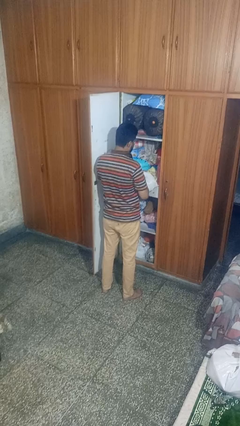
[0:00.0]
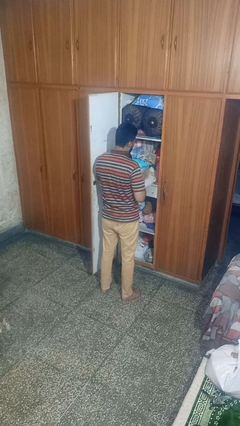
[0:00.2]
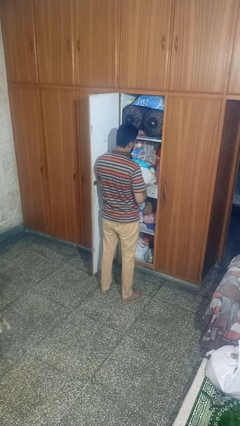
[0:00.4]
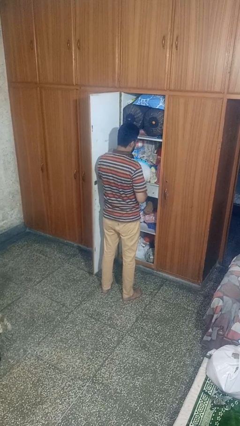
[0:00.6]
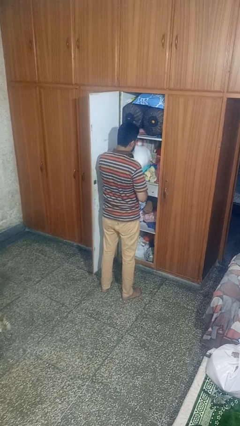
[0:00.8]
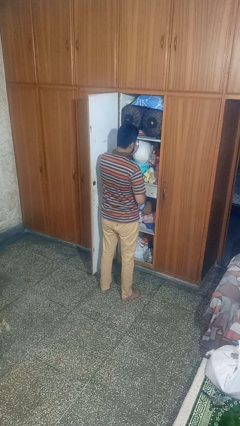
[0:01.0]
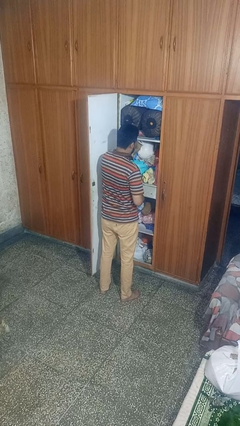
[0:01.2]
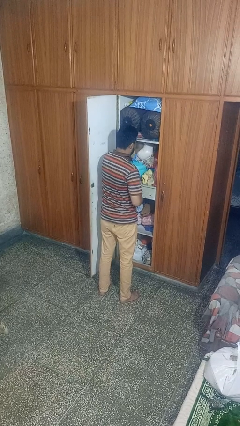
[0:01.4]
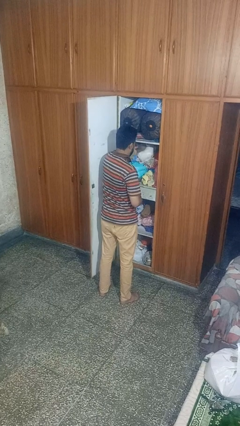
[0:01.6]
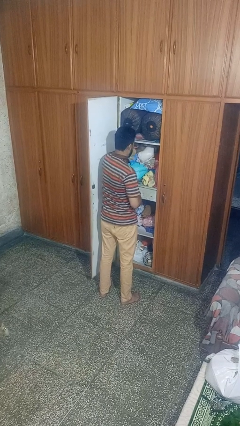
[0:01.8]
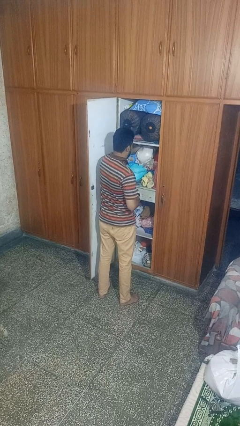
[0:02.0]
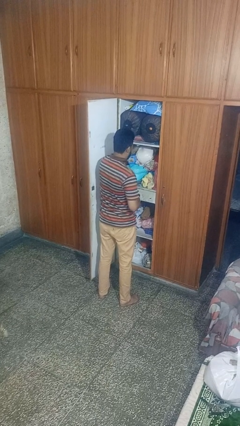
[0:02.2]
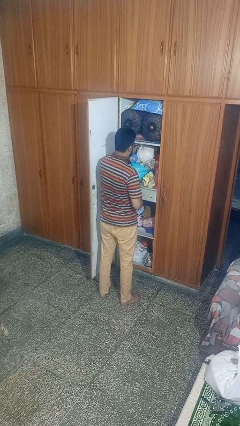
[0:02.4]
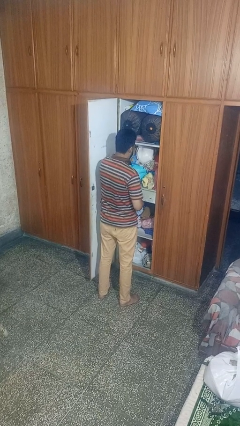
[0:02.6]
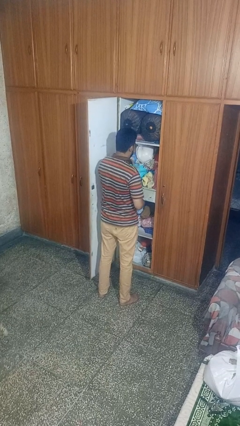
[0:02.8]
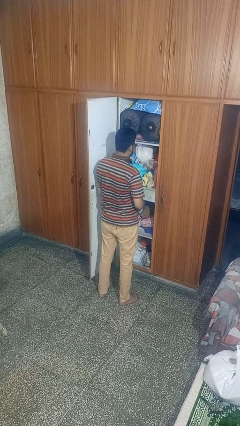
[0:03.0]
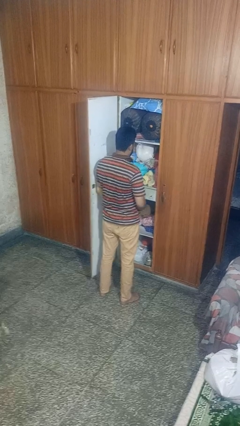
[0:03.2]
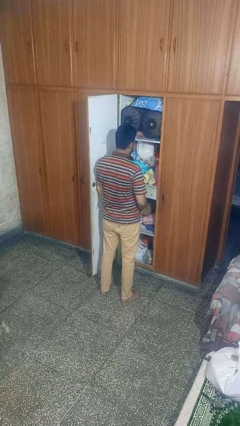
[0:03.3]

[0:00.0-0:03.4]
person puts down object into cabinet

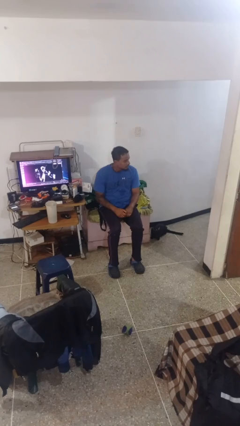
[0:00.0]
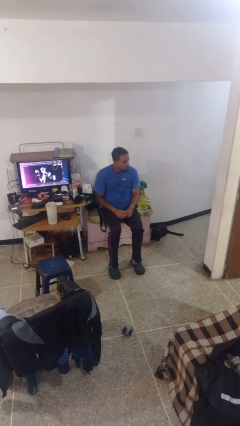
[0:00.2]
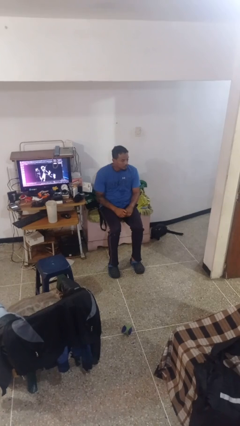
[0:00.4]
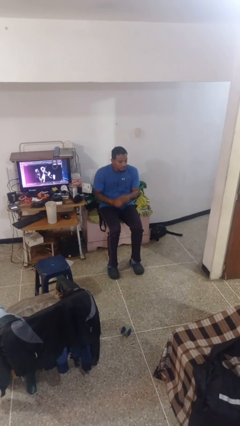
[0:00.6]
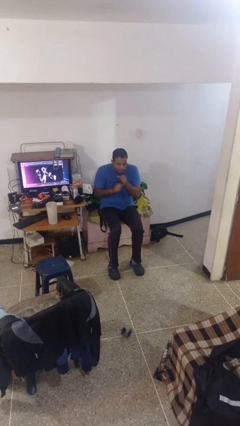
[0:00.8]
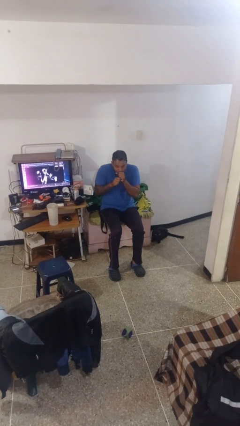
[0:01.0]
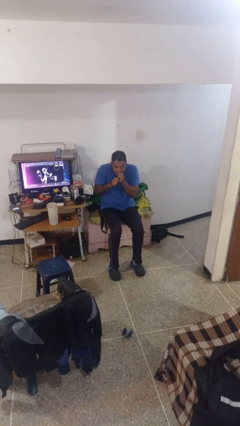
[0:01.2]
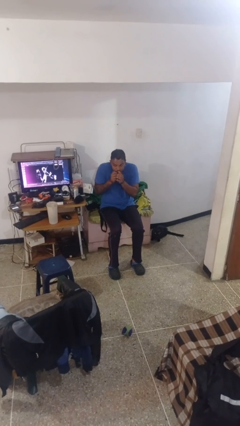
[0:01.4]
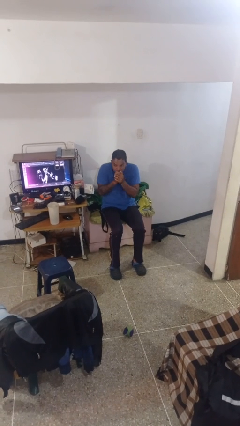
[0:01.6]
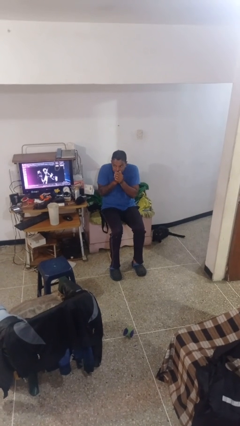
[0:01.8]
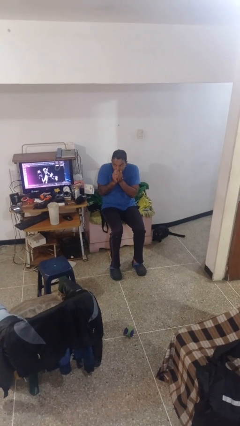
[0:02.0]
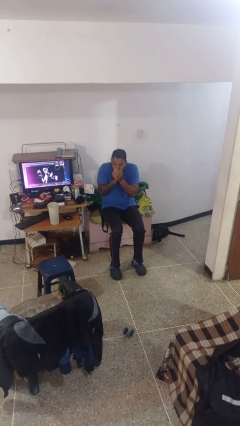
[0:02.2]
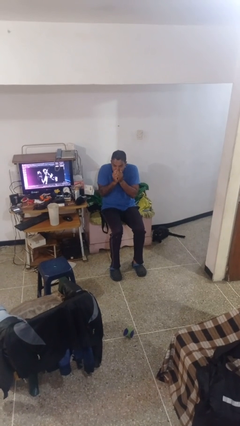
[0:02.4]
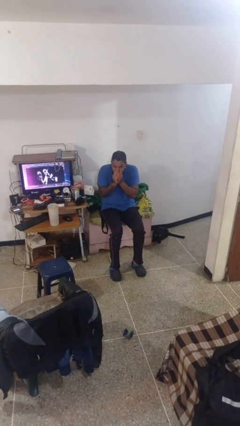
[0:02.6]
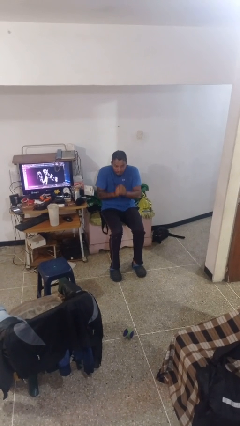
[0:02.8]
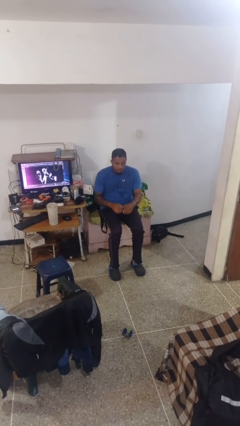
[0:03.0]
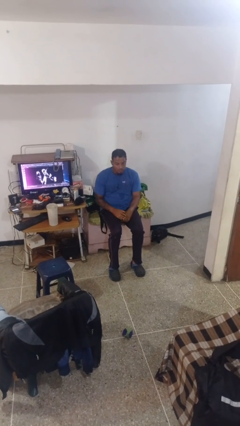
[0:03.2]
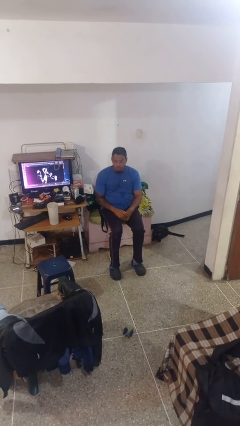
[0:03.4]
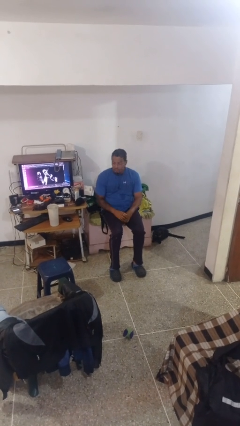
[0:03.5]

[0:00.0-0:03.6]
person blows into hands

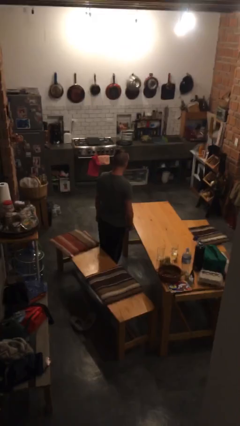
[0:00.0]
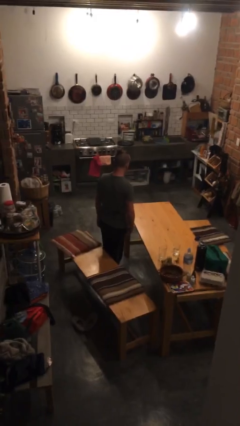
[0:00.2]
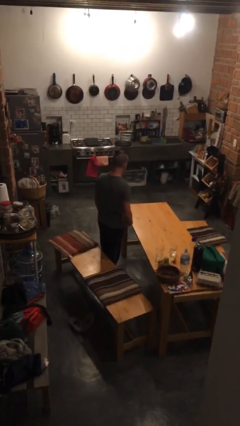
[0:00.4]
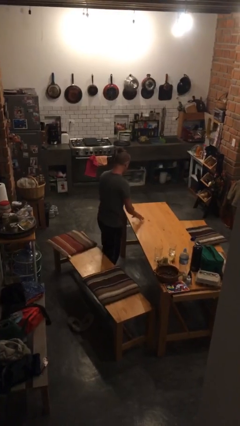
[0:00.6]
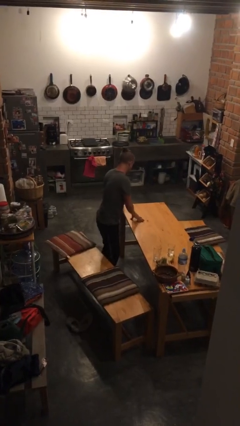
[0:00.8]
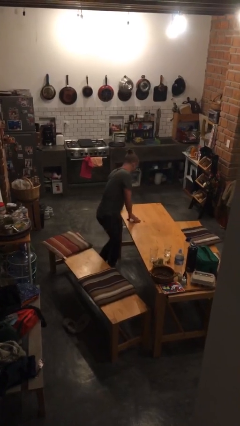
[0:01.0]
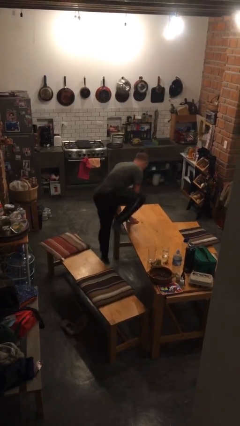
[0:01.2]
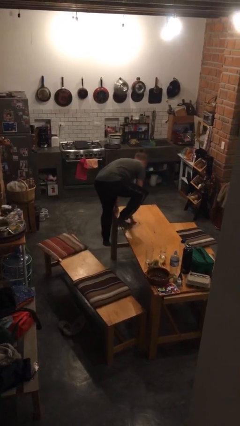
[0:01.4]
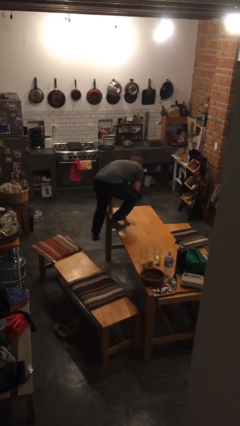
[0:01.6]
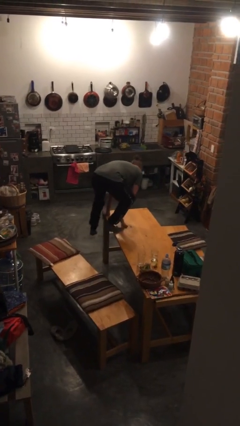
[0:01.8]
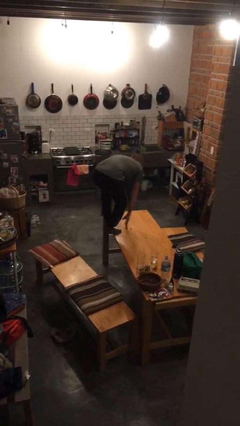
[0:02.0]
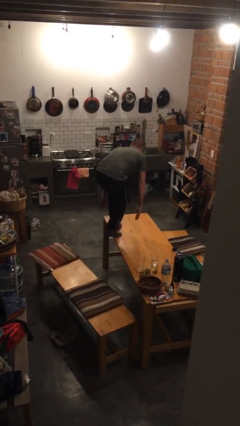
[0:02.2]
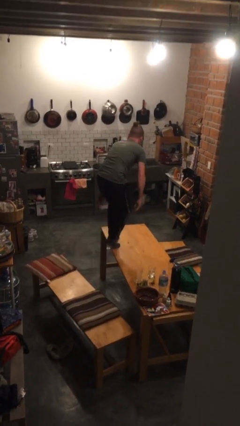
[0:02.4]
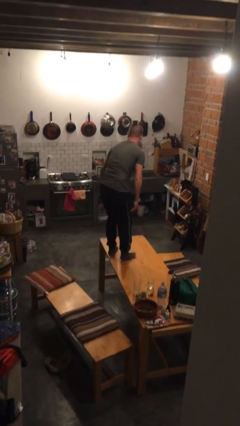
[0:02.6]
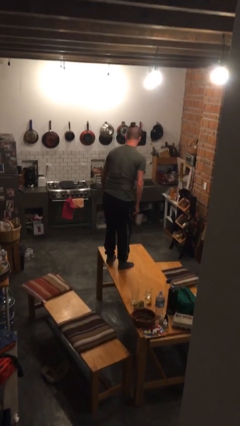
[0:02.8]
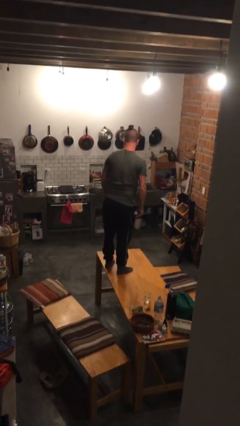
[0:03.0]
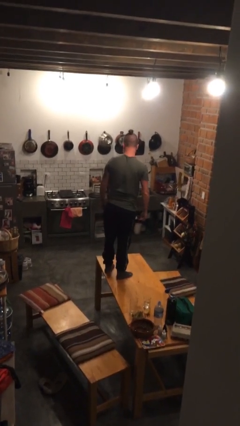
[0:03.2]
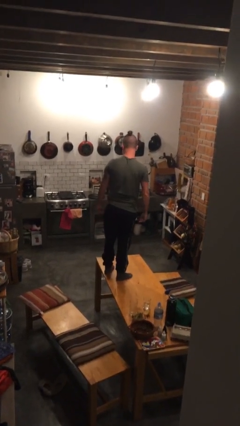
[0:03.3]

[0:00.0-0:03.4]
person climbs on table

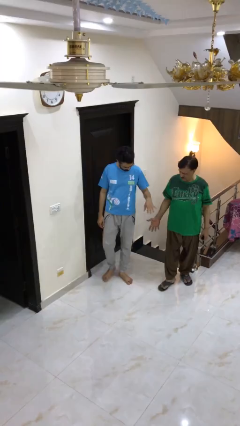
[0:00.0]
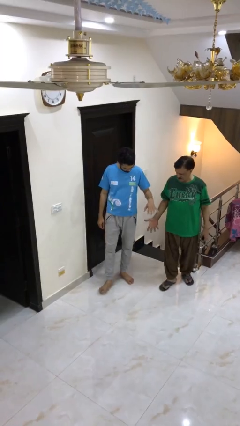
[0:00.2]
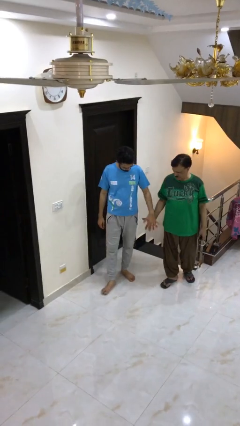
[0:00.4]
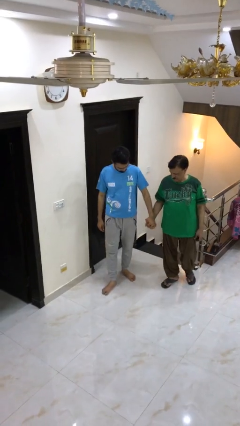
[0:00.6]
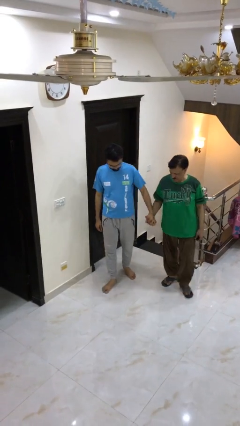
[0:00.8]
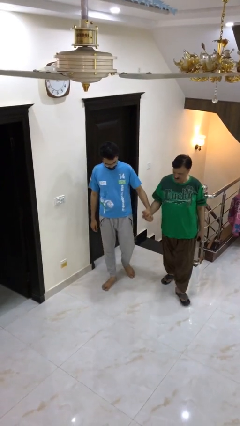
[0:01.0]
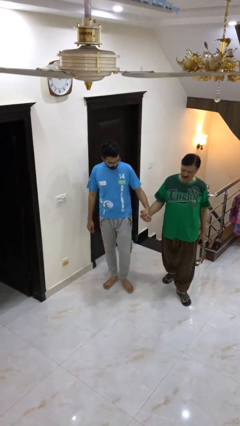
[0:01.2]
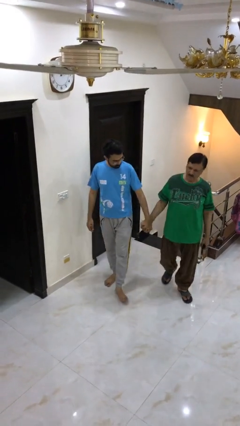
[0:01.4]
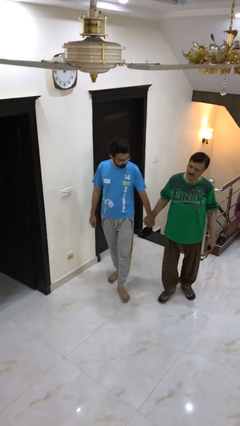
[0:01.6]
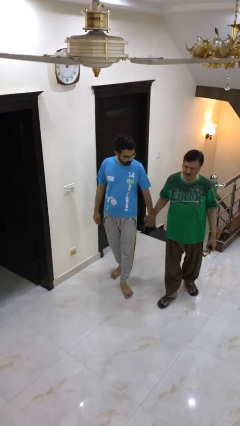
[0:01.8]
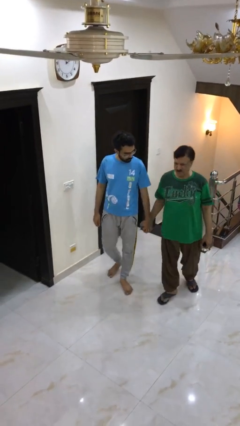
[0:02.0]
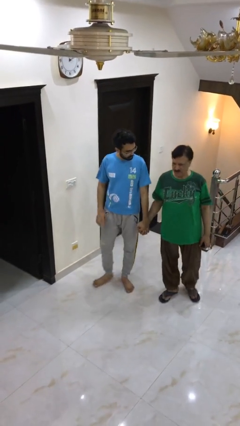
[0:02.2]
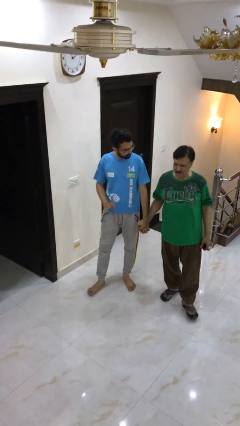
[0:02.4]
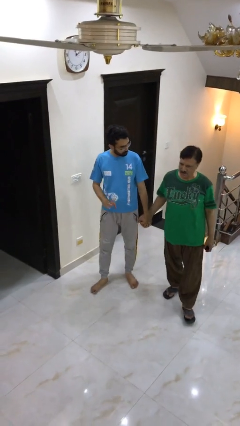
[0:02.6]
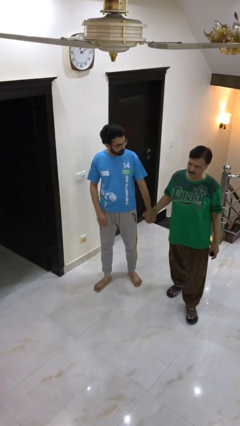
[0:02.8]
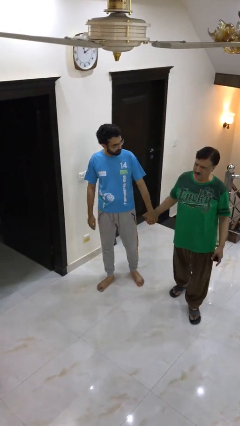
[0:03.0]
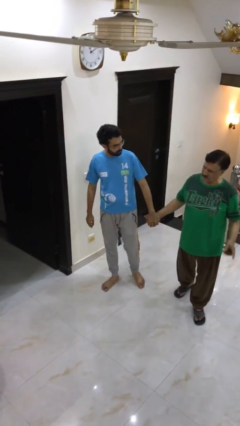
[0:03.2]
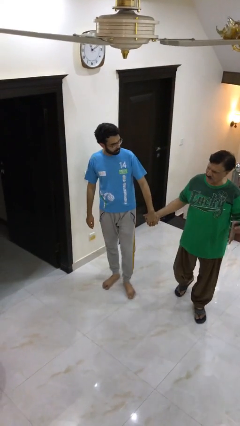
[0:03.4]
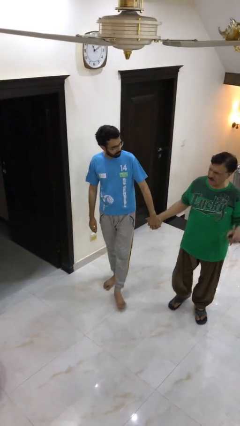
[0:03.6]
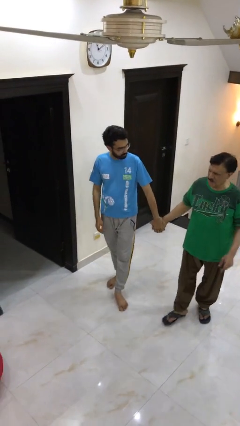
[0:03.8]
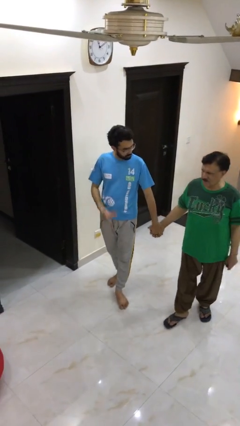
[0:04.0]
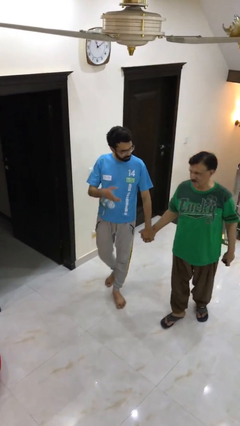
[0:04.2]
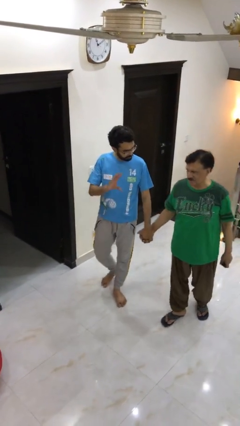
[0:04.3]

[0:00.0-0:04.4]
person holds hand

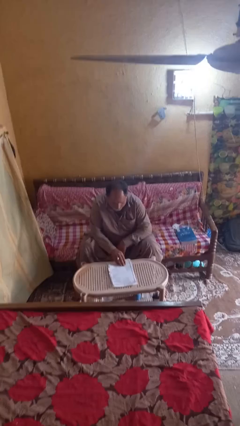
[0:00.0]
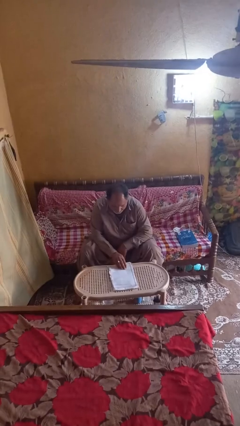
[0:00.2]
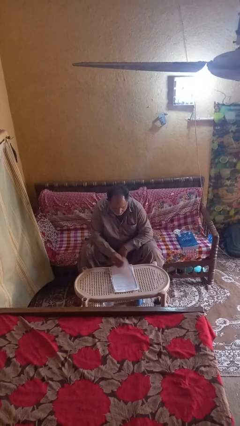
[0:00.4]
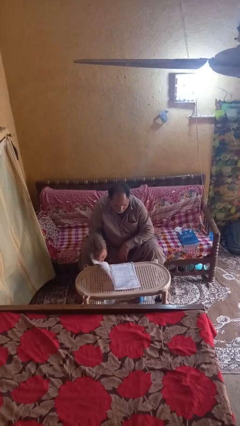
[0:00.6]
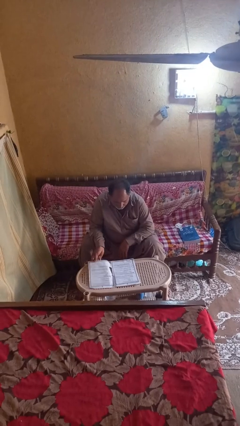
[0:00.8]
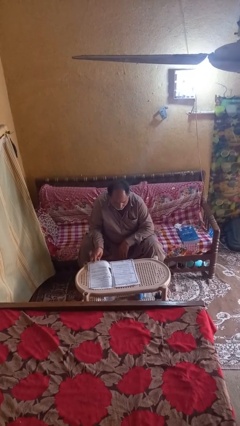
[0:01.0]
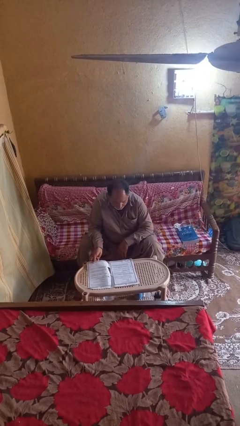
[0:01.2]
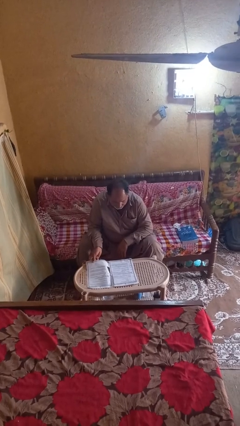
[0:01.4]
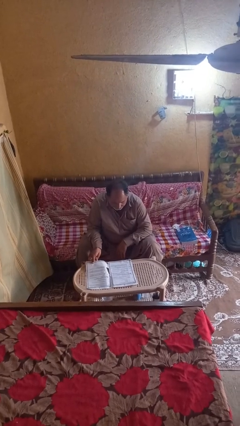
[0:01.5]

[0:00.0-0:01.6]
person reads newspaper

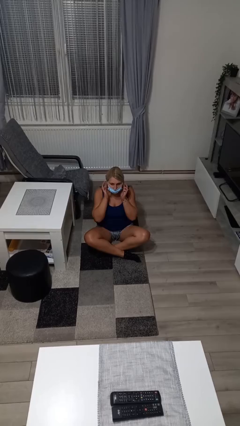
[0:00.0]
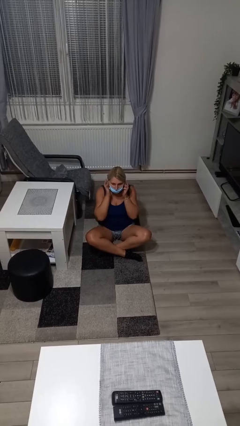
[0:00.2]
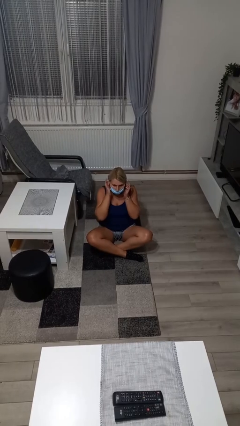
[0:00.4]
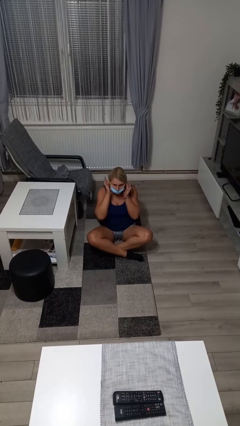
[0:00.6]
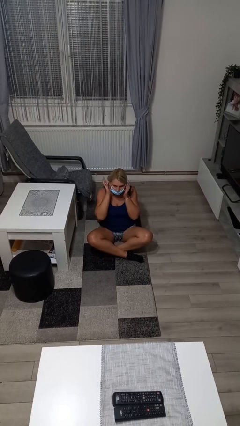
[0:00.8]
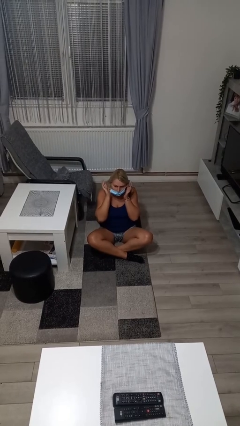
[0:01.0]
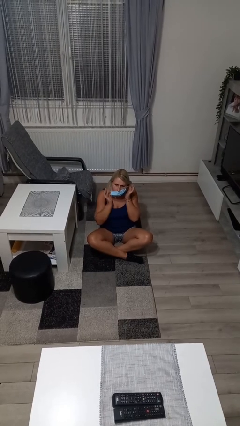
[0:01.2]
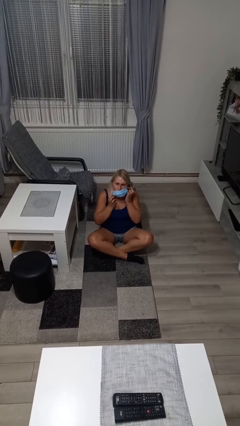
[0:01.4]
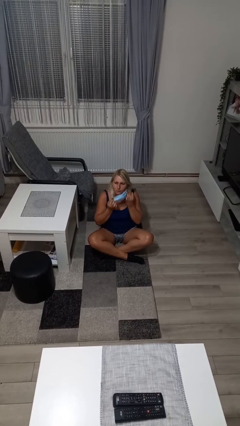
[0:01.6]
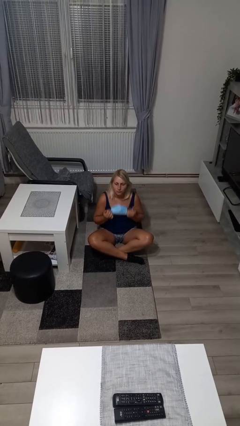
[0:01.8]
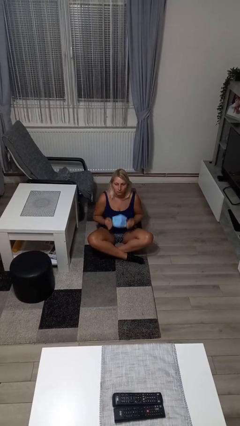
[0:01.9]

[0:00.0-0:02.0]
person takes off facemask
